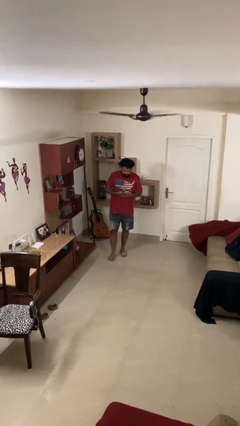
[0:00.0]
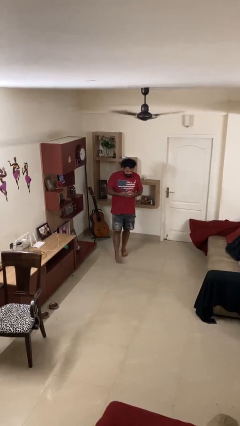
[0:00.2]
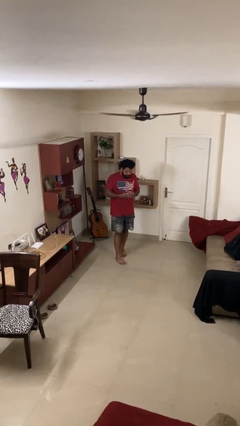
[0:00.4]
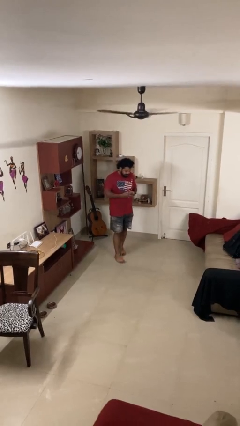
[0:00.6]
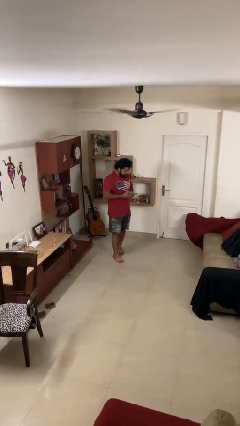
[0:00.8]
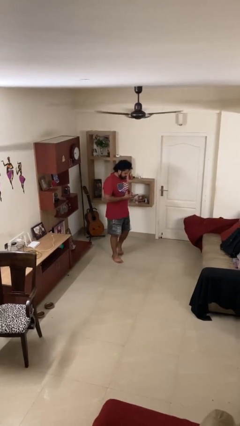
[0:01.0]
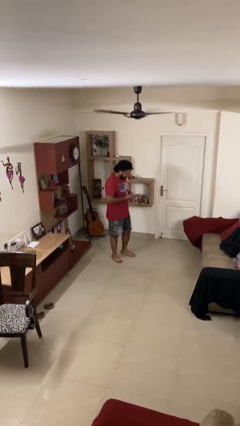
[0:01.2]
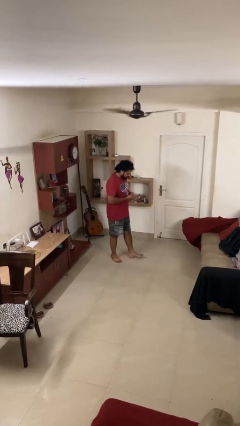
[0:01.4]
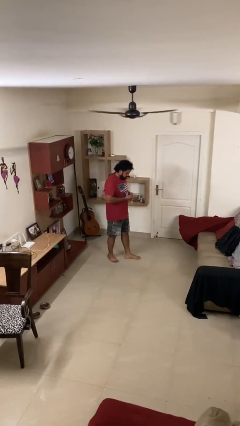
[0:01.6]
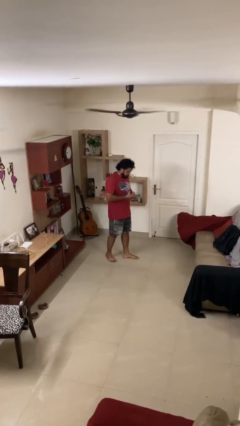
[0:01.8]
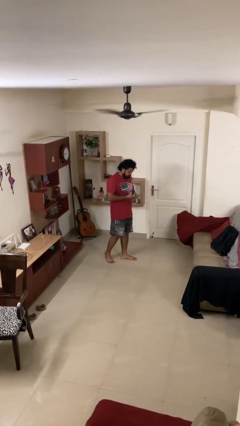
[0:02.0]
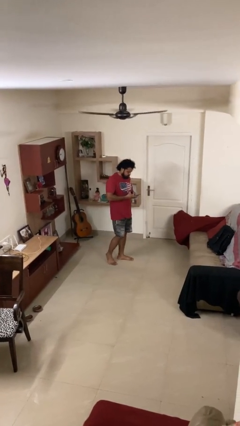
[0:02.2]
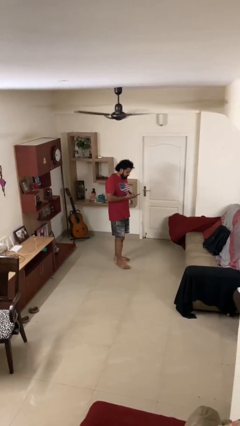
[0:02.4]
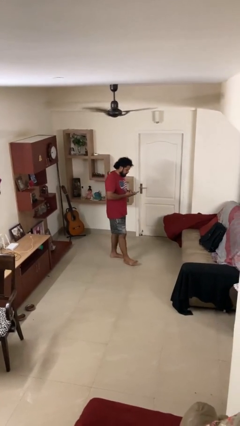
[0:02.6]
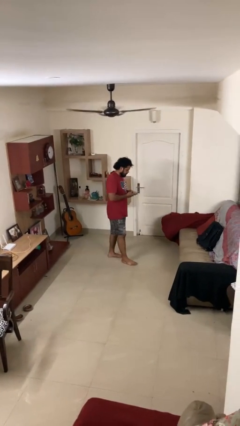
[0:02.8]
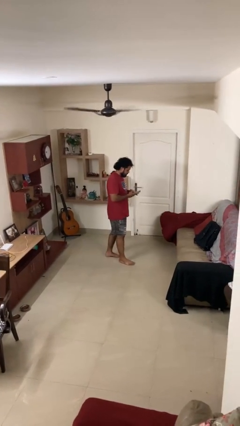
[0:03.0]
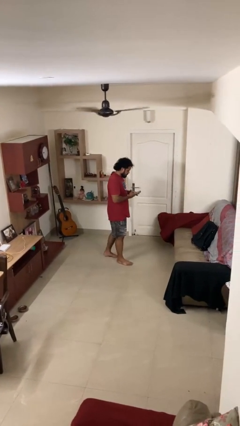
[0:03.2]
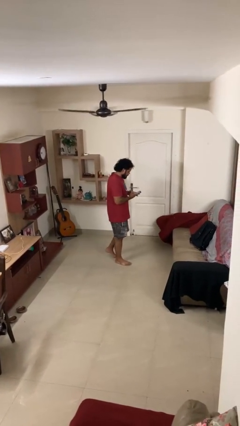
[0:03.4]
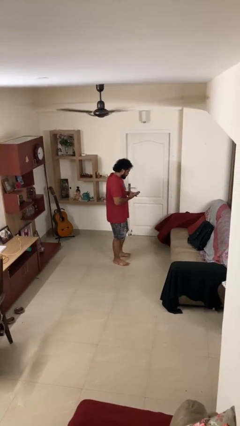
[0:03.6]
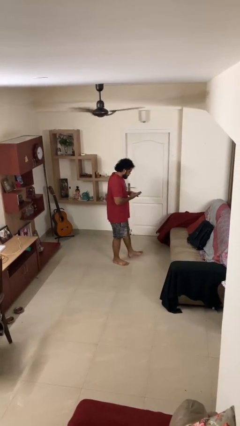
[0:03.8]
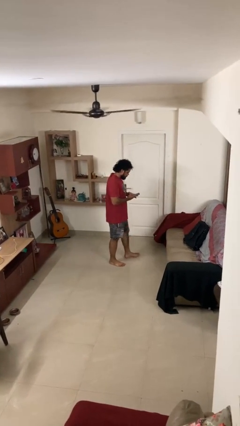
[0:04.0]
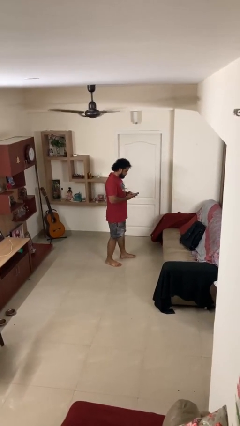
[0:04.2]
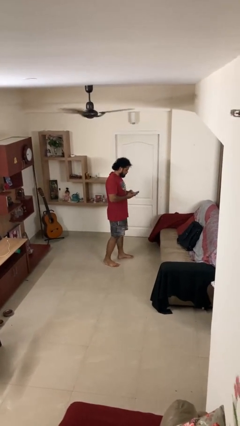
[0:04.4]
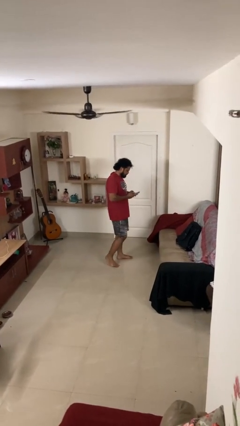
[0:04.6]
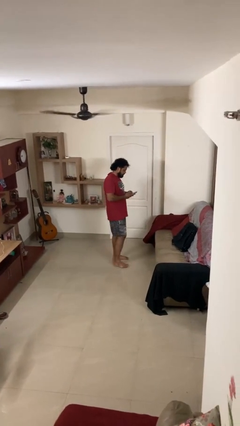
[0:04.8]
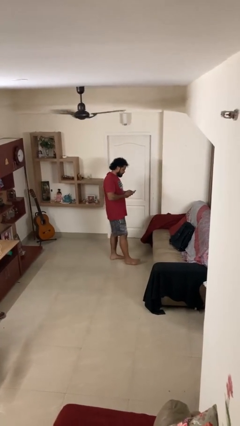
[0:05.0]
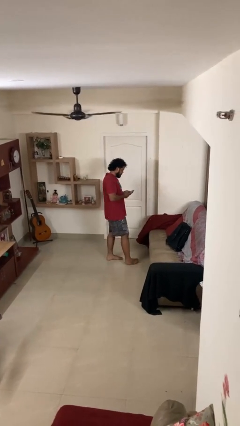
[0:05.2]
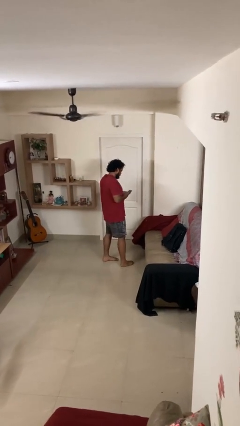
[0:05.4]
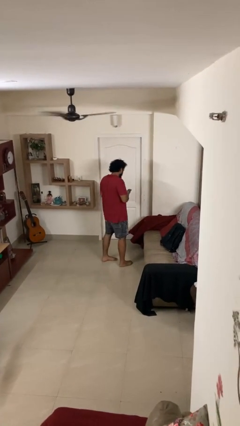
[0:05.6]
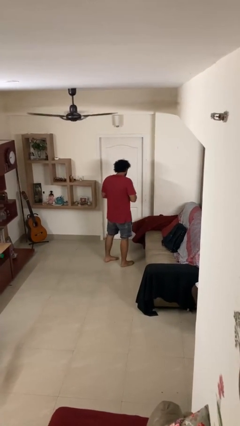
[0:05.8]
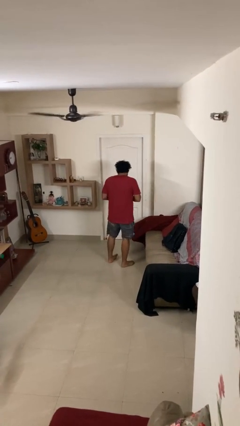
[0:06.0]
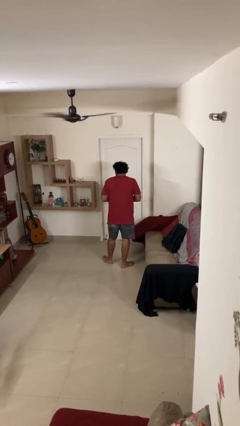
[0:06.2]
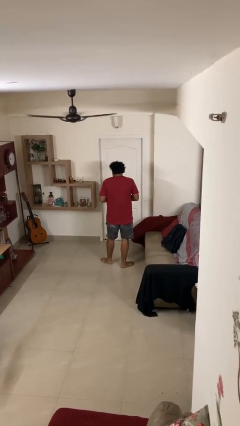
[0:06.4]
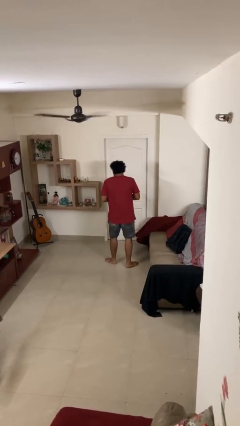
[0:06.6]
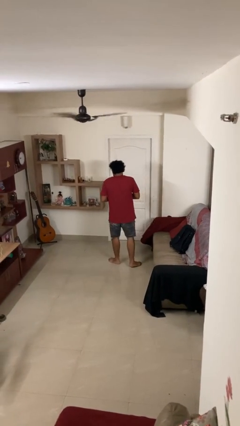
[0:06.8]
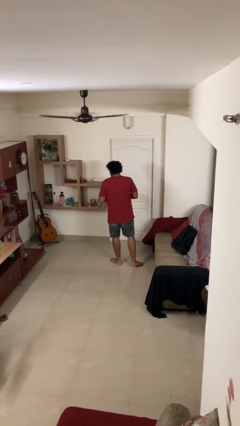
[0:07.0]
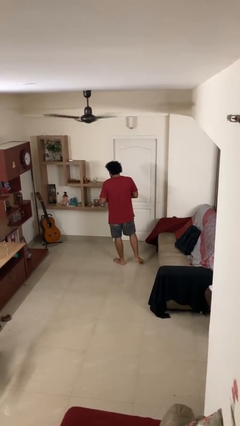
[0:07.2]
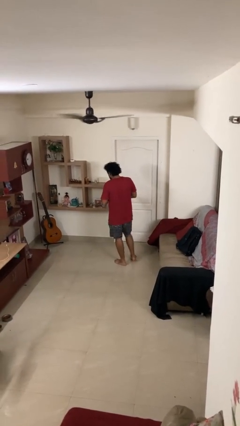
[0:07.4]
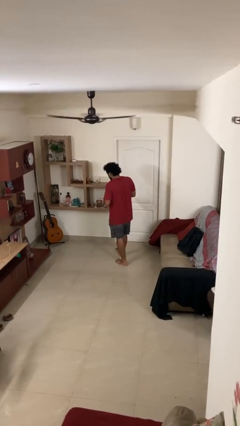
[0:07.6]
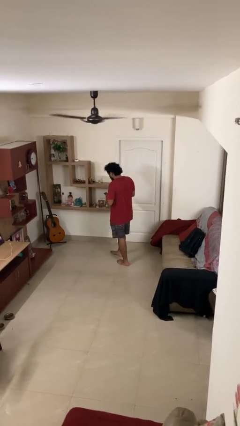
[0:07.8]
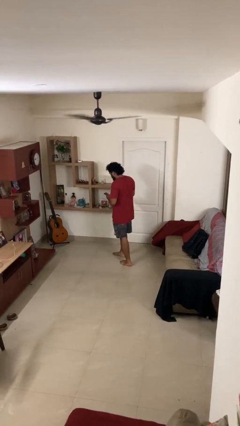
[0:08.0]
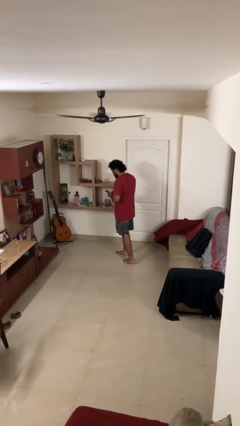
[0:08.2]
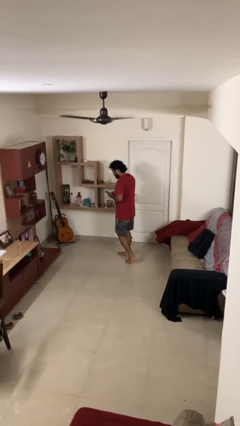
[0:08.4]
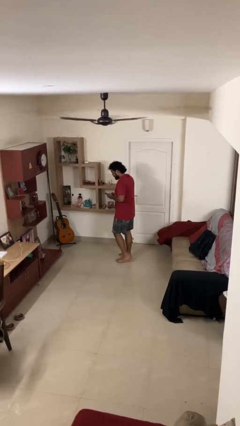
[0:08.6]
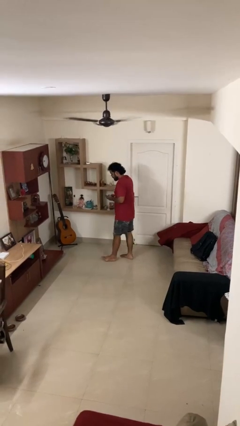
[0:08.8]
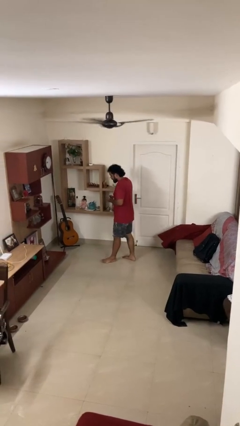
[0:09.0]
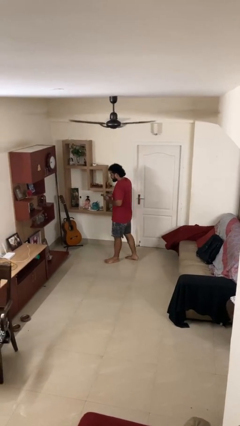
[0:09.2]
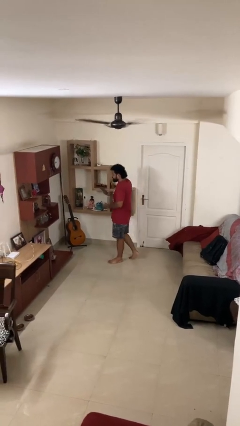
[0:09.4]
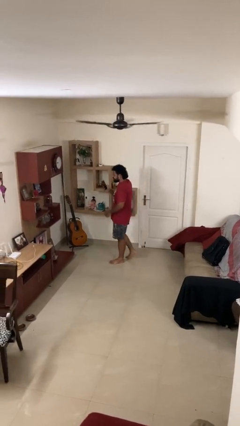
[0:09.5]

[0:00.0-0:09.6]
person texts on phone

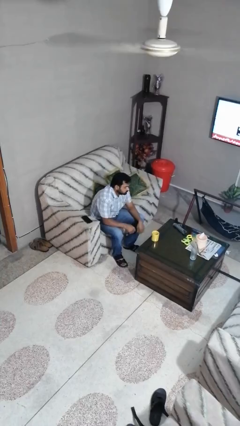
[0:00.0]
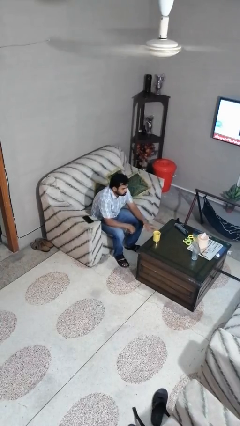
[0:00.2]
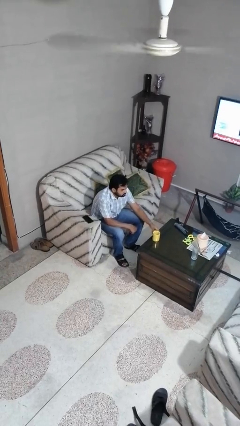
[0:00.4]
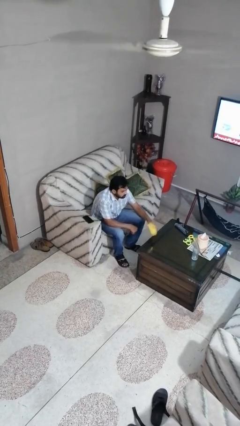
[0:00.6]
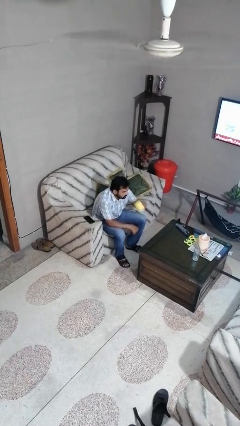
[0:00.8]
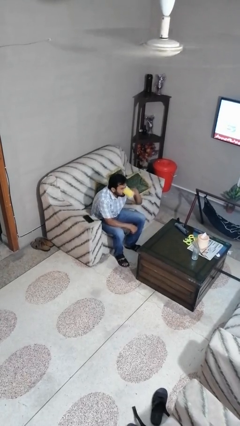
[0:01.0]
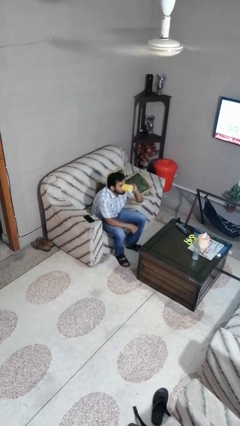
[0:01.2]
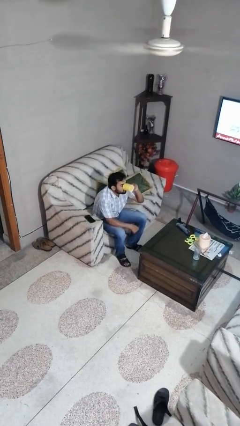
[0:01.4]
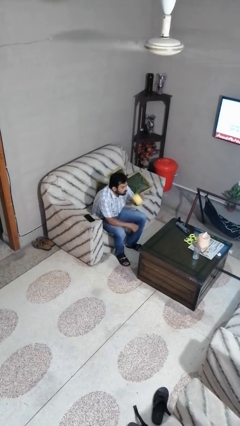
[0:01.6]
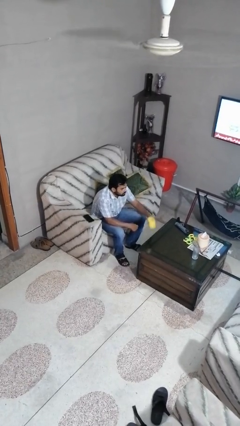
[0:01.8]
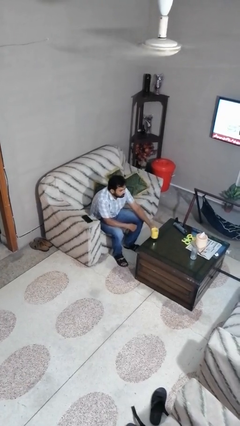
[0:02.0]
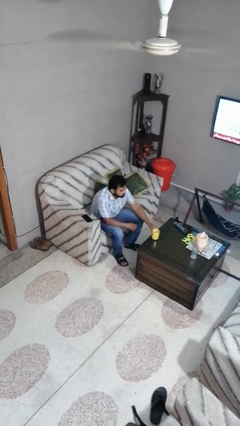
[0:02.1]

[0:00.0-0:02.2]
person drinks from mug

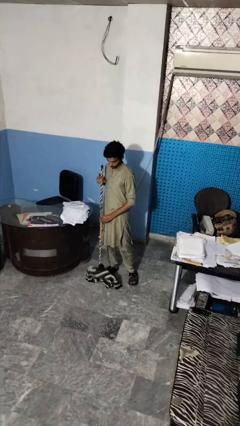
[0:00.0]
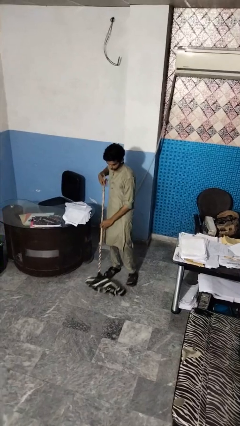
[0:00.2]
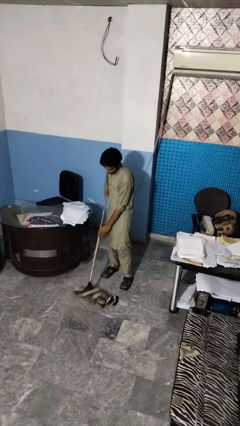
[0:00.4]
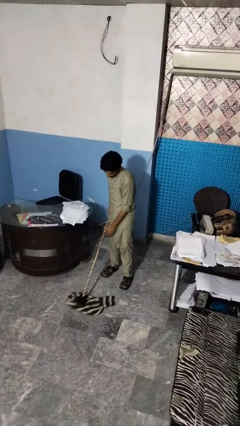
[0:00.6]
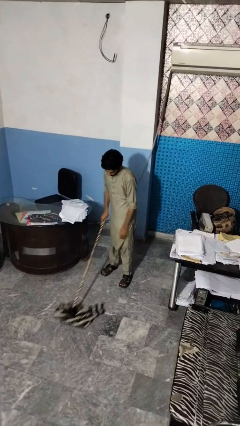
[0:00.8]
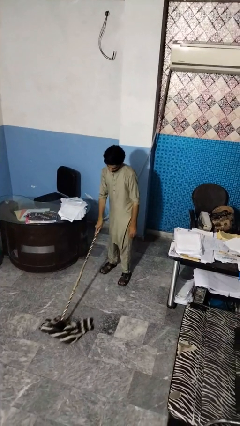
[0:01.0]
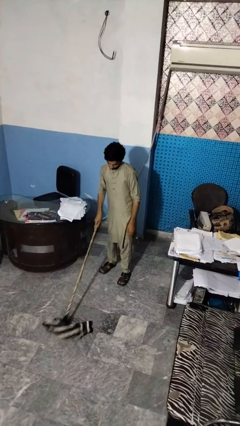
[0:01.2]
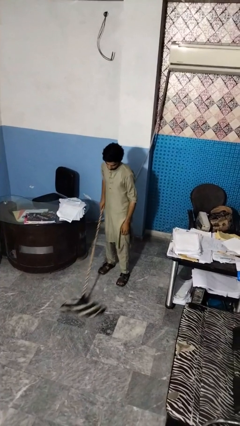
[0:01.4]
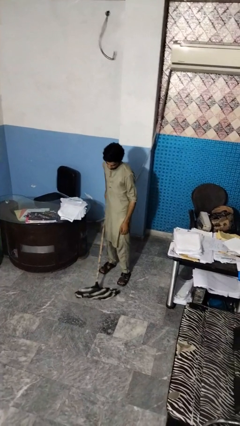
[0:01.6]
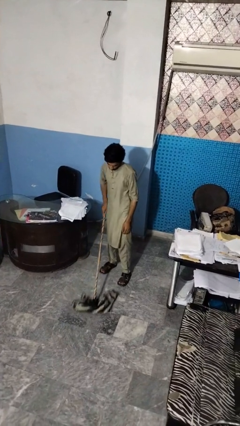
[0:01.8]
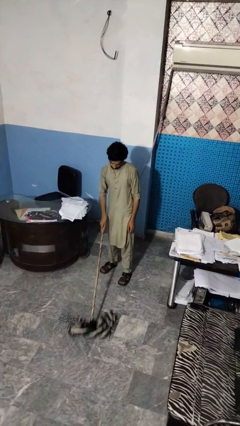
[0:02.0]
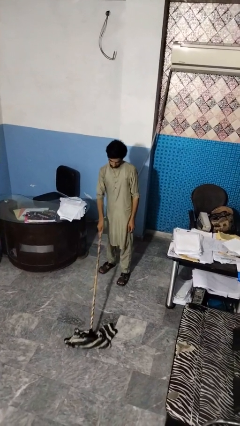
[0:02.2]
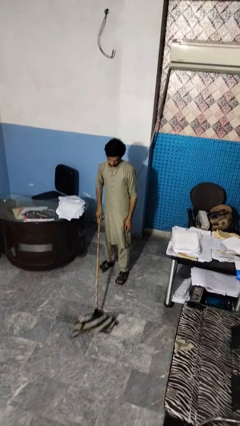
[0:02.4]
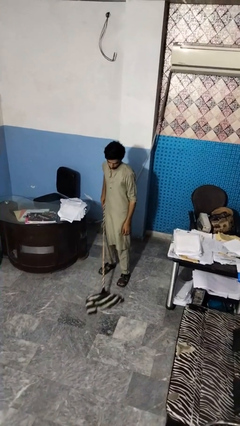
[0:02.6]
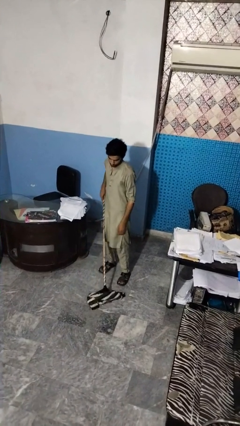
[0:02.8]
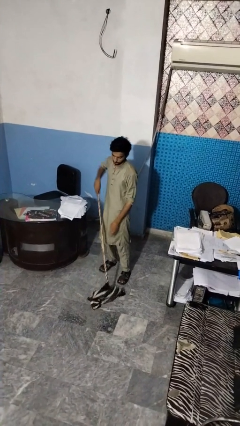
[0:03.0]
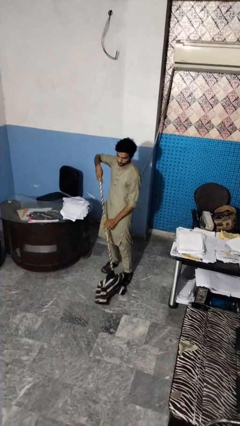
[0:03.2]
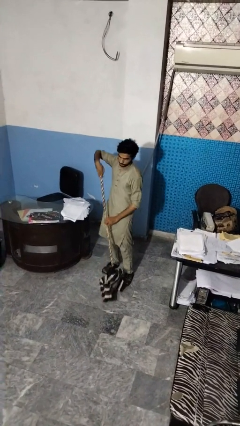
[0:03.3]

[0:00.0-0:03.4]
person mops

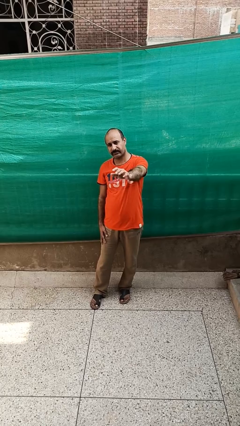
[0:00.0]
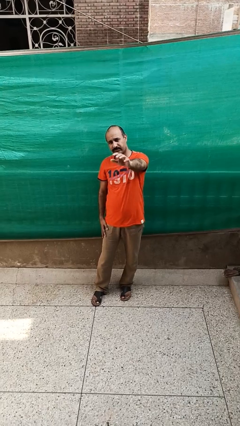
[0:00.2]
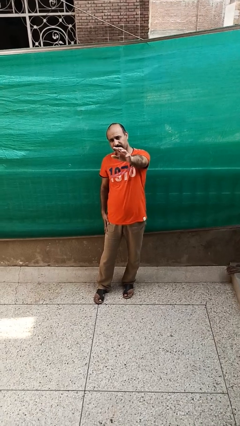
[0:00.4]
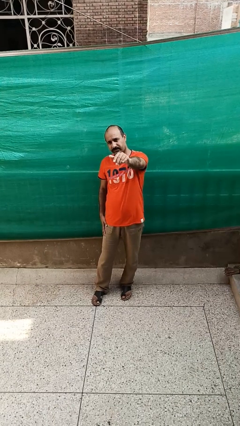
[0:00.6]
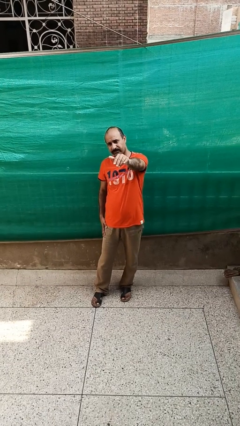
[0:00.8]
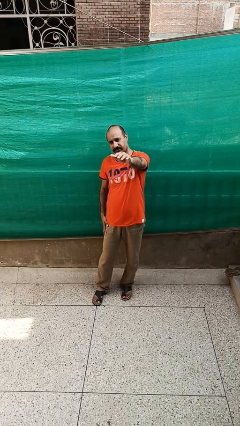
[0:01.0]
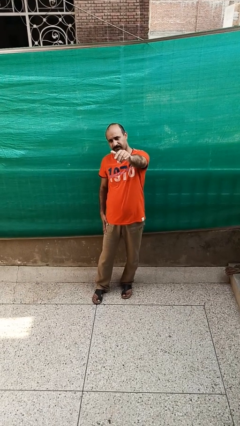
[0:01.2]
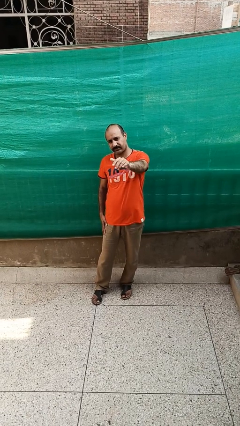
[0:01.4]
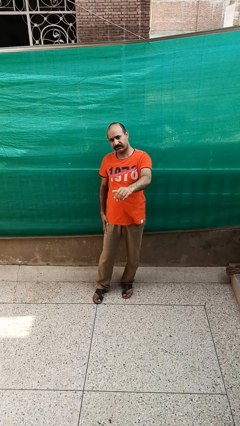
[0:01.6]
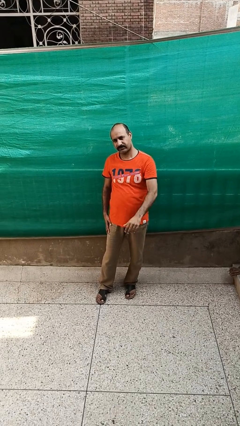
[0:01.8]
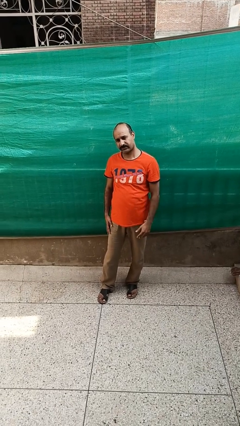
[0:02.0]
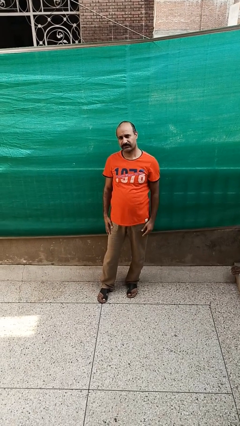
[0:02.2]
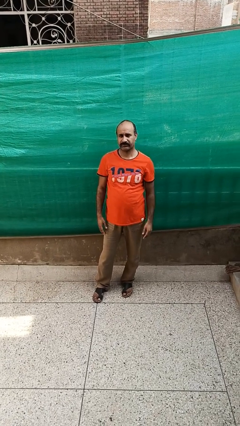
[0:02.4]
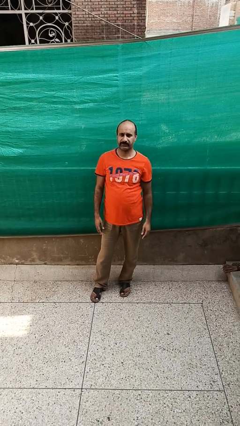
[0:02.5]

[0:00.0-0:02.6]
person gestures come here
